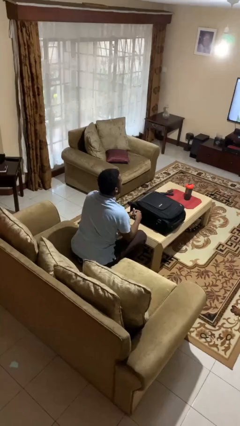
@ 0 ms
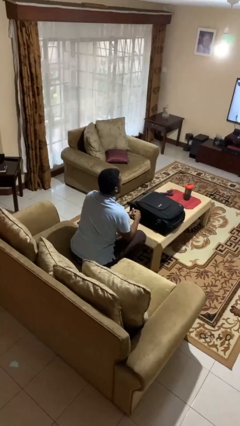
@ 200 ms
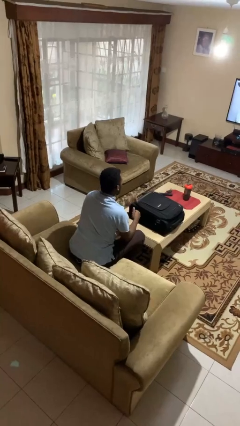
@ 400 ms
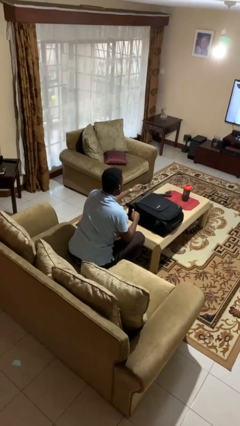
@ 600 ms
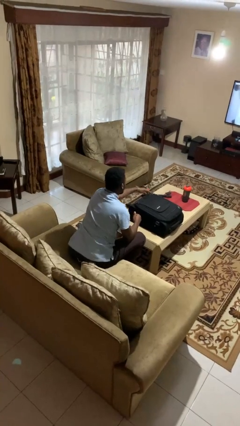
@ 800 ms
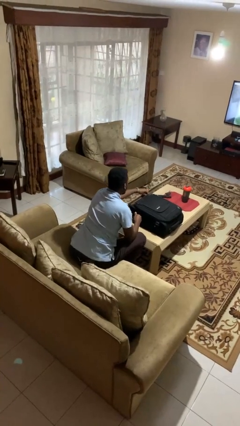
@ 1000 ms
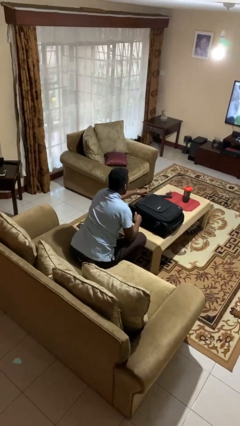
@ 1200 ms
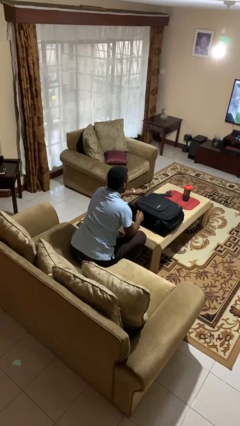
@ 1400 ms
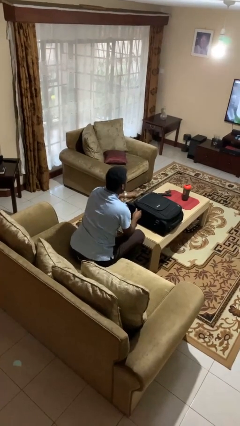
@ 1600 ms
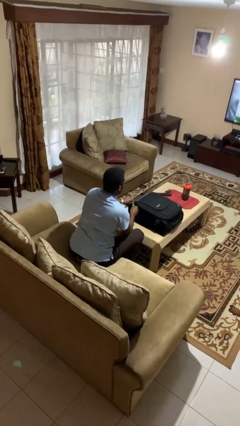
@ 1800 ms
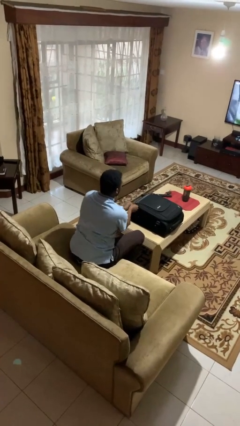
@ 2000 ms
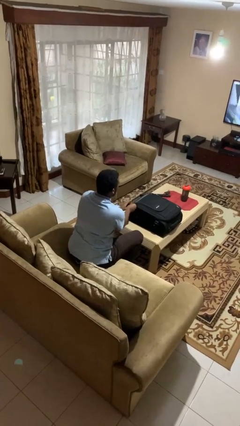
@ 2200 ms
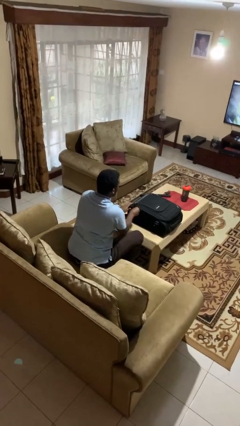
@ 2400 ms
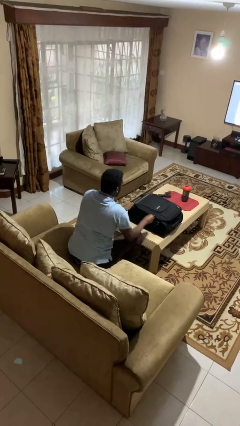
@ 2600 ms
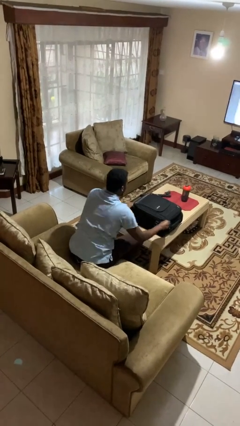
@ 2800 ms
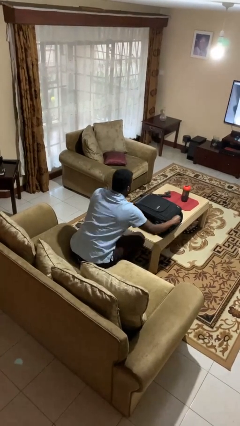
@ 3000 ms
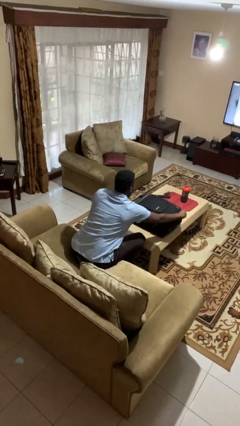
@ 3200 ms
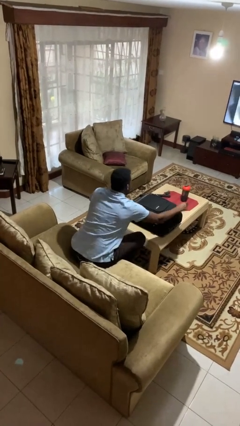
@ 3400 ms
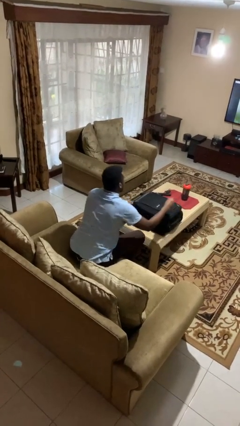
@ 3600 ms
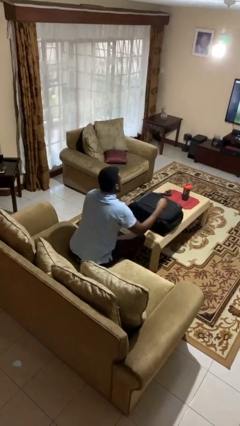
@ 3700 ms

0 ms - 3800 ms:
person closes suitcase

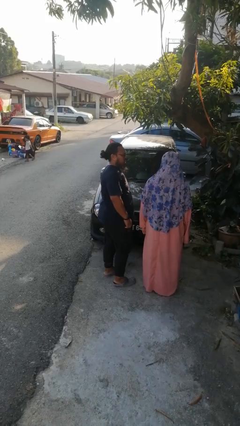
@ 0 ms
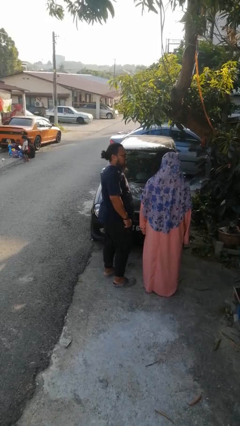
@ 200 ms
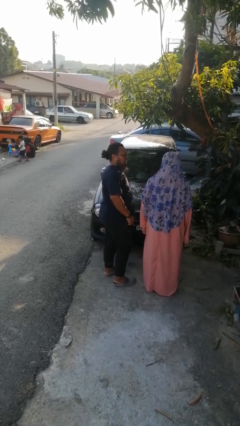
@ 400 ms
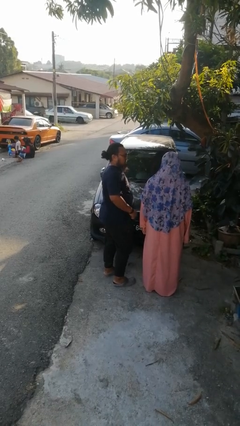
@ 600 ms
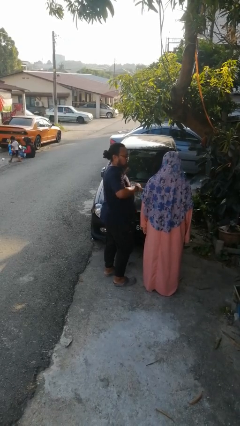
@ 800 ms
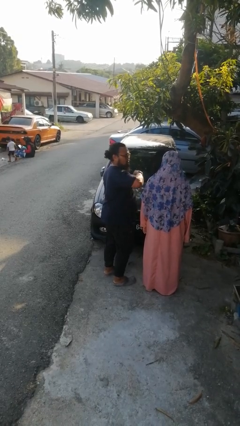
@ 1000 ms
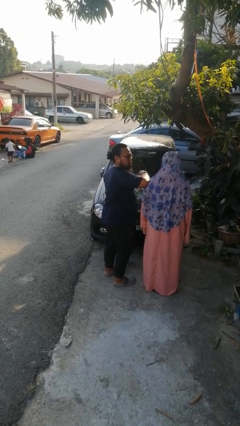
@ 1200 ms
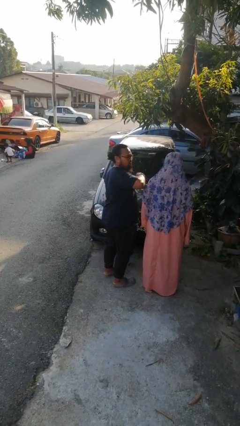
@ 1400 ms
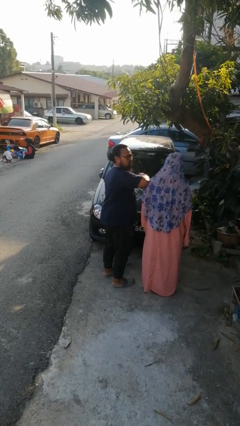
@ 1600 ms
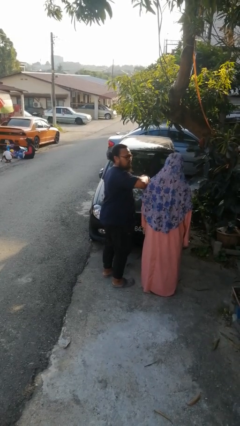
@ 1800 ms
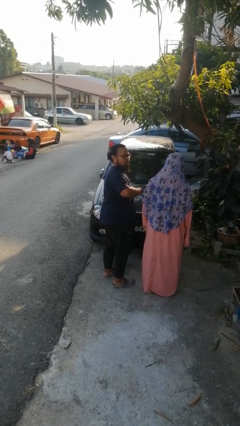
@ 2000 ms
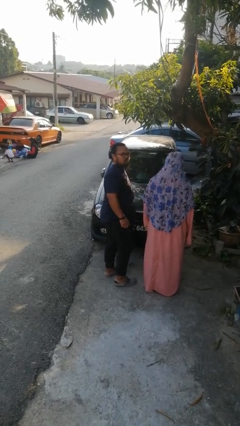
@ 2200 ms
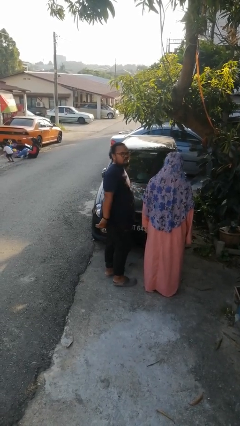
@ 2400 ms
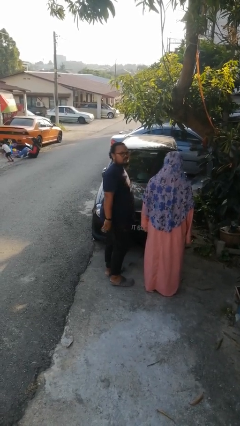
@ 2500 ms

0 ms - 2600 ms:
person nudges person with elbow

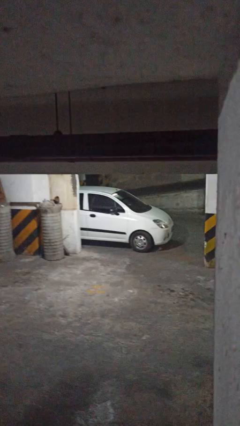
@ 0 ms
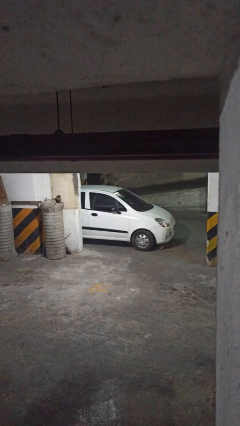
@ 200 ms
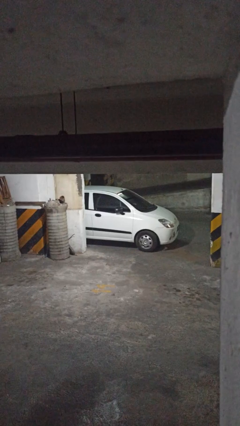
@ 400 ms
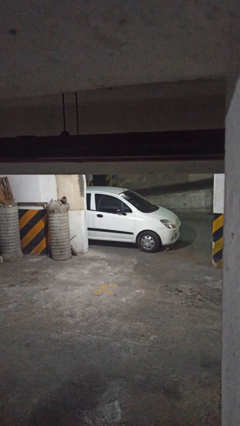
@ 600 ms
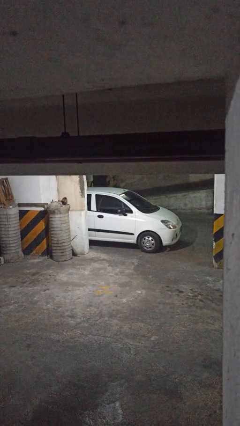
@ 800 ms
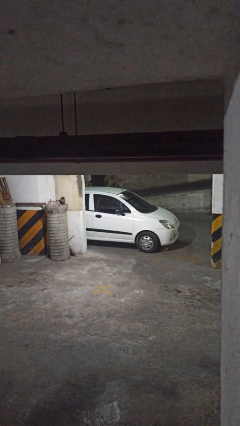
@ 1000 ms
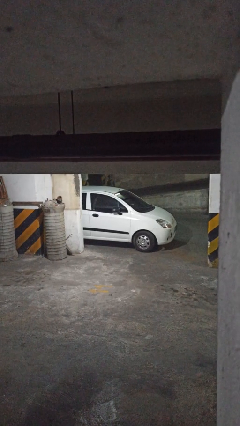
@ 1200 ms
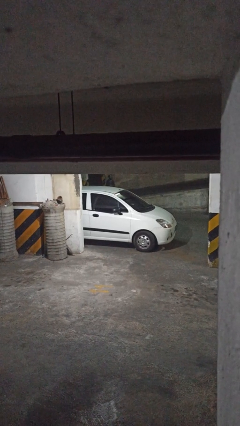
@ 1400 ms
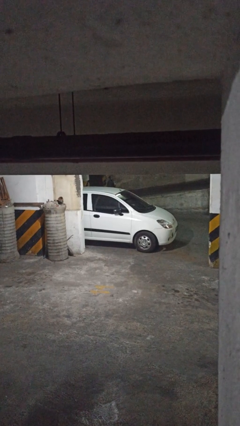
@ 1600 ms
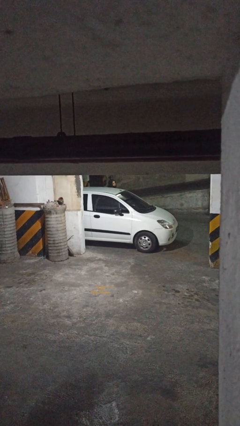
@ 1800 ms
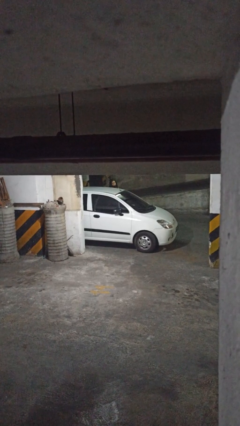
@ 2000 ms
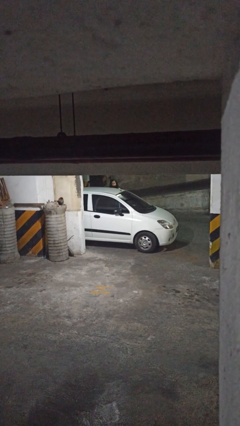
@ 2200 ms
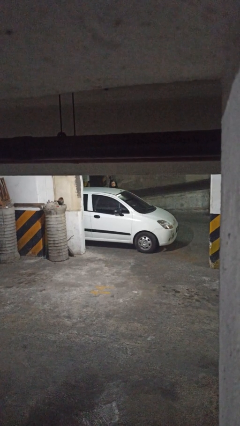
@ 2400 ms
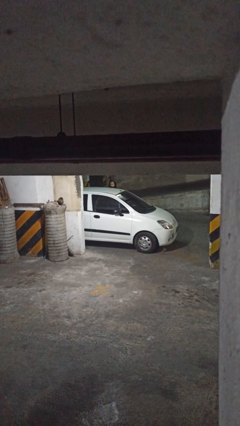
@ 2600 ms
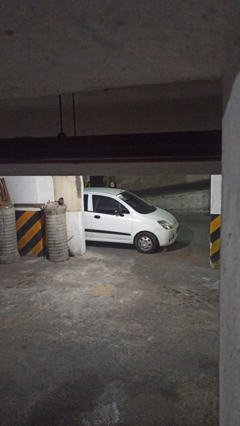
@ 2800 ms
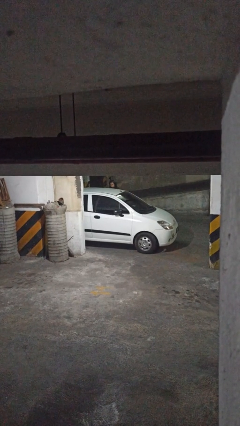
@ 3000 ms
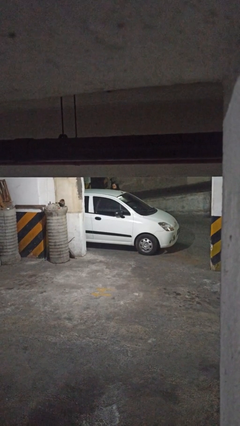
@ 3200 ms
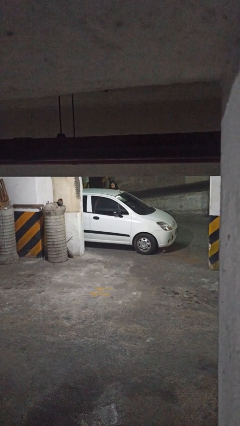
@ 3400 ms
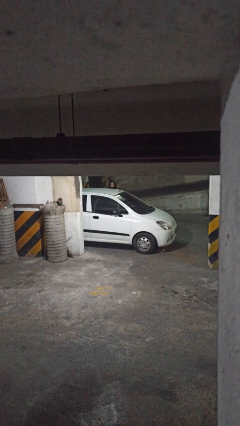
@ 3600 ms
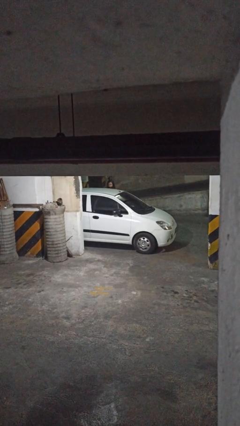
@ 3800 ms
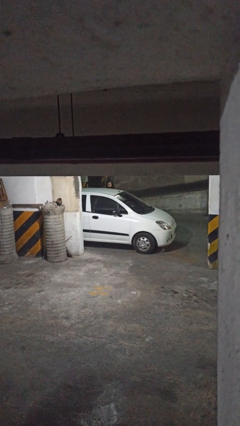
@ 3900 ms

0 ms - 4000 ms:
car drops off person

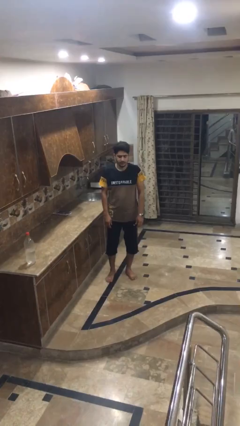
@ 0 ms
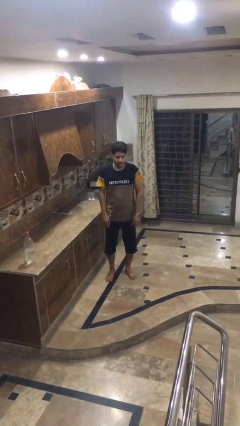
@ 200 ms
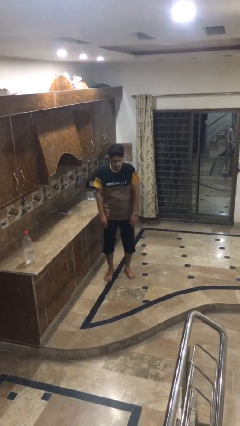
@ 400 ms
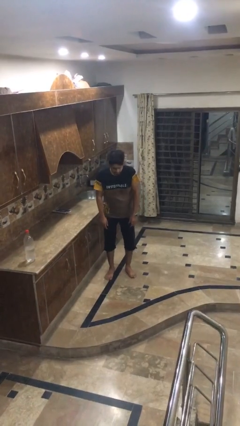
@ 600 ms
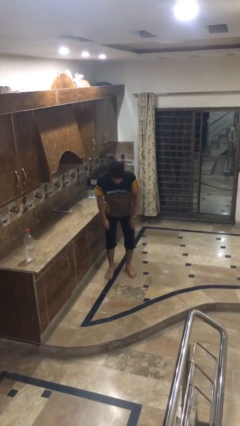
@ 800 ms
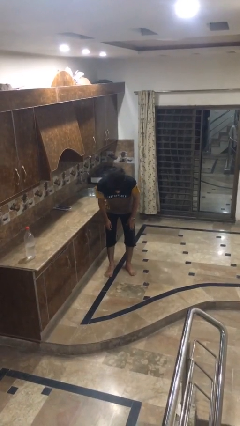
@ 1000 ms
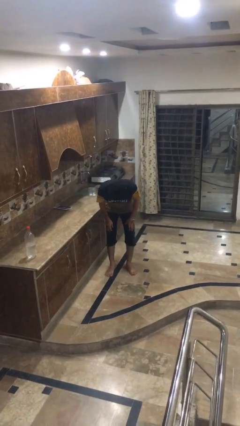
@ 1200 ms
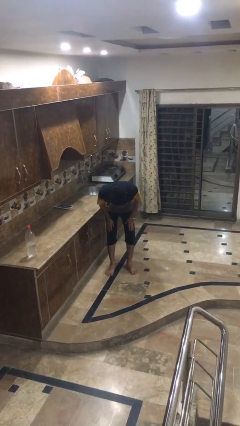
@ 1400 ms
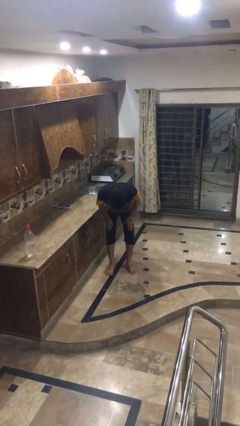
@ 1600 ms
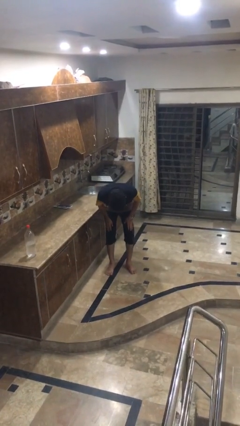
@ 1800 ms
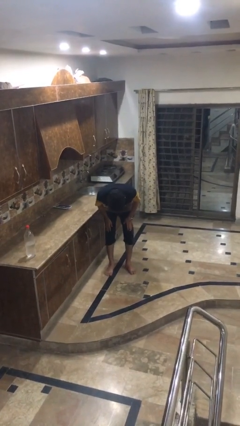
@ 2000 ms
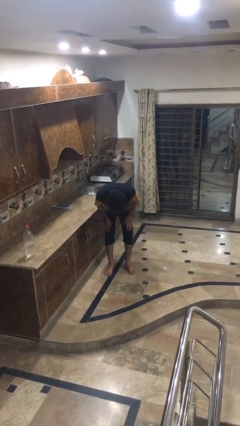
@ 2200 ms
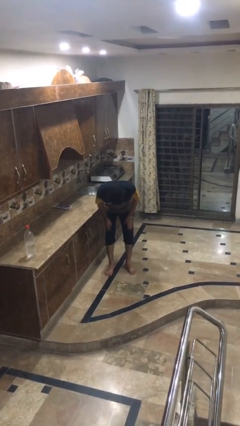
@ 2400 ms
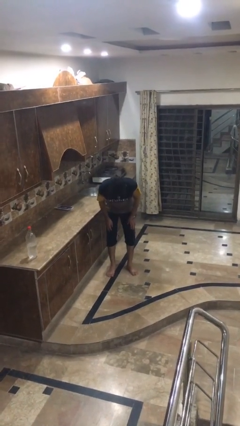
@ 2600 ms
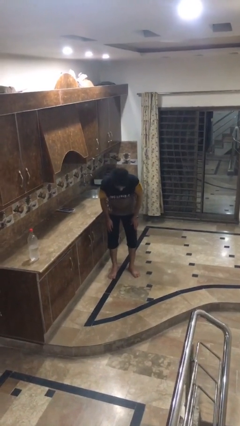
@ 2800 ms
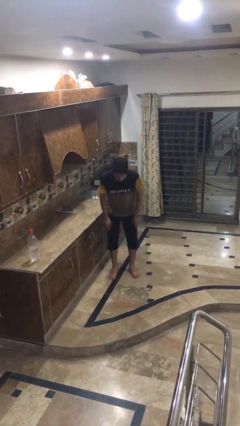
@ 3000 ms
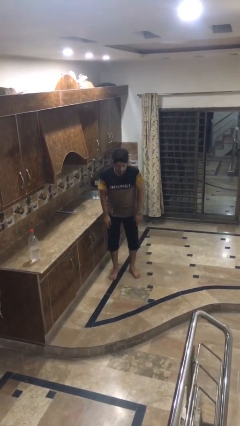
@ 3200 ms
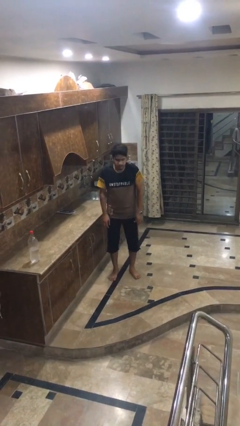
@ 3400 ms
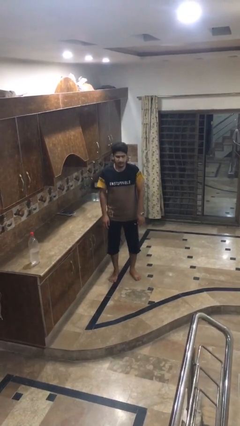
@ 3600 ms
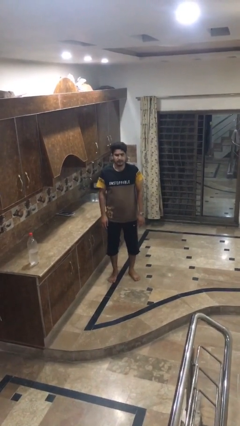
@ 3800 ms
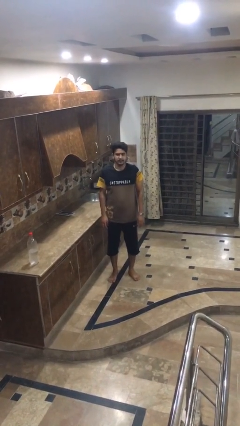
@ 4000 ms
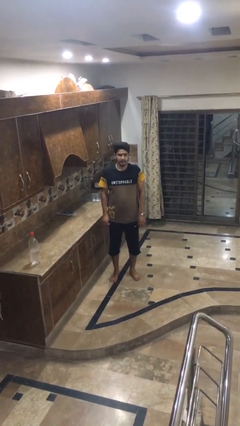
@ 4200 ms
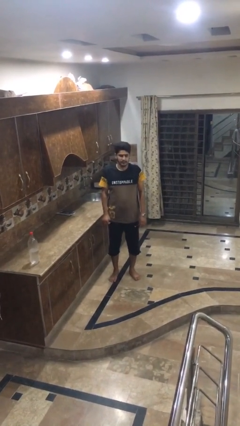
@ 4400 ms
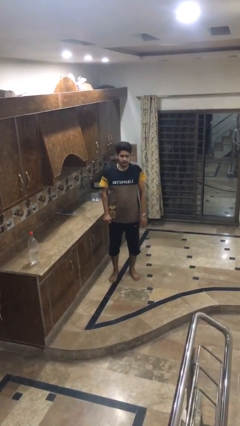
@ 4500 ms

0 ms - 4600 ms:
person bows

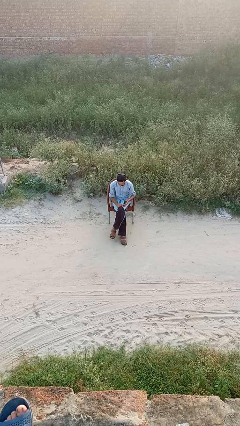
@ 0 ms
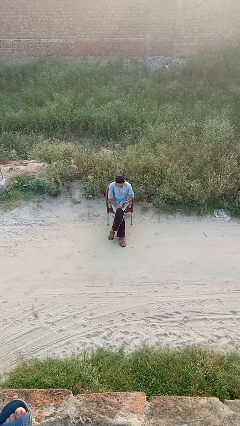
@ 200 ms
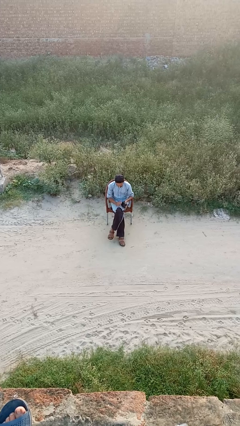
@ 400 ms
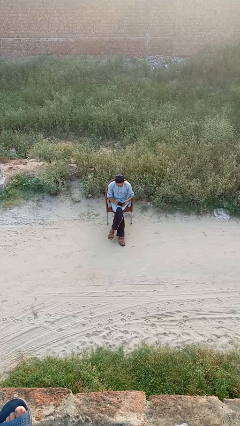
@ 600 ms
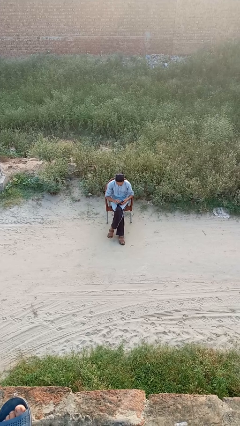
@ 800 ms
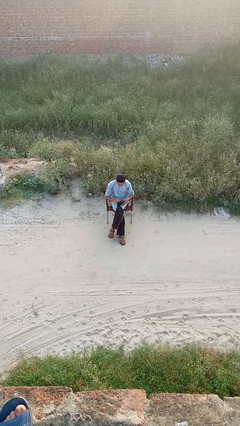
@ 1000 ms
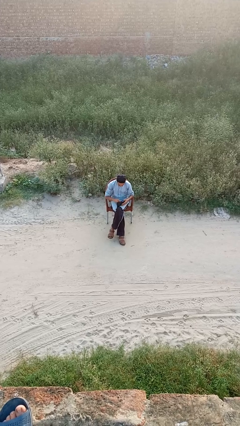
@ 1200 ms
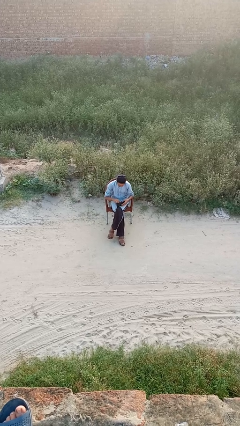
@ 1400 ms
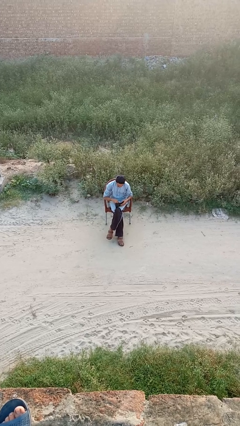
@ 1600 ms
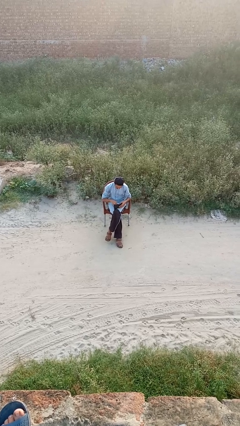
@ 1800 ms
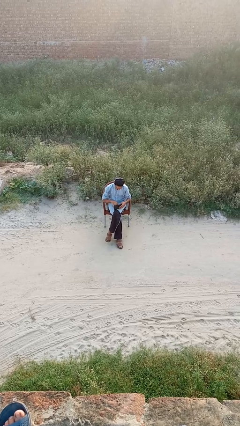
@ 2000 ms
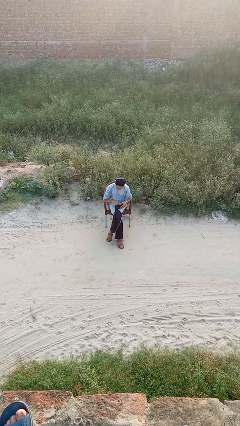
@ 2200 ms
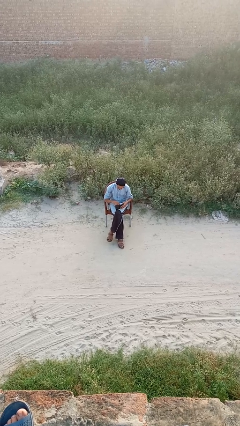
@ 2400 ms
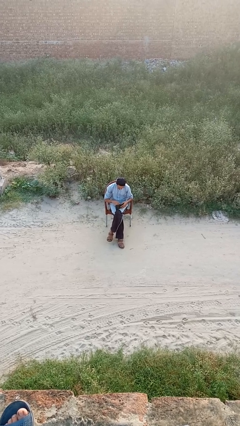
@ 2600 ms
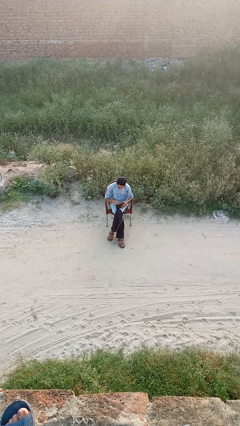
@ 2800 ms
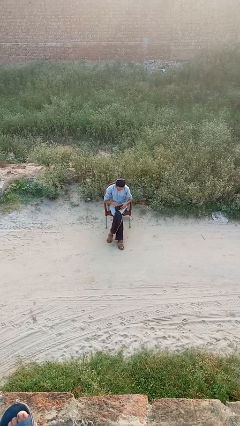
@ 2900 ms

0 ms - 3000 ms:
person searches in purse
